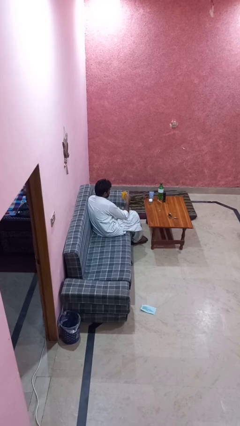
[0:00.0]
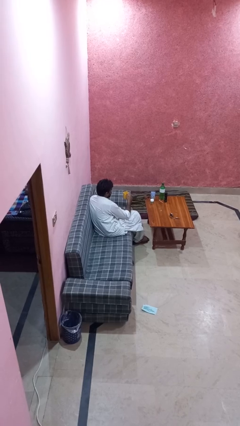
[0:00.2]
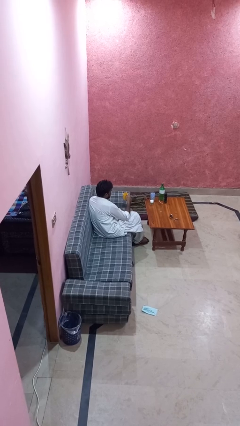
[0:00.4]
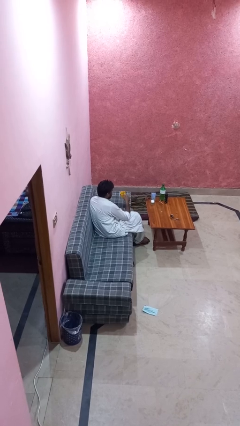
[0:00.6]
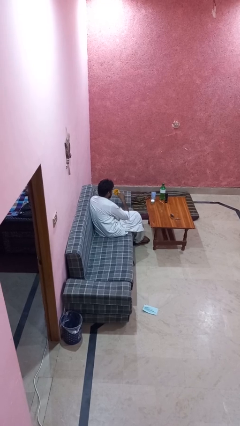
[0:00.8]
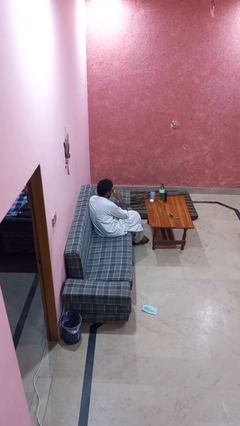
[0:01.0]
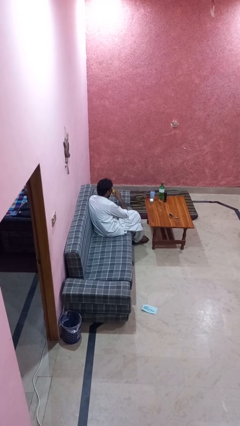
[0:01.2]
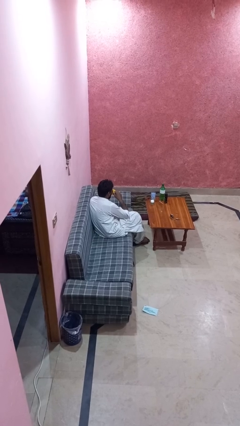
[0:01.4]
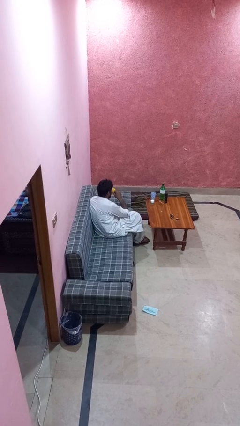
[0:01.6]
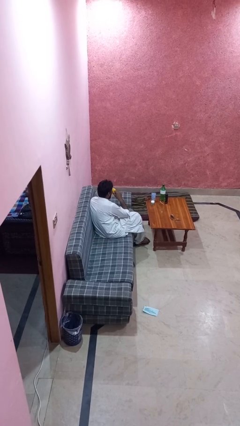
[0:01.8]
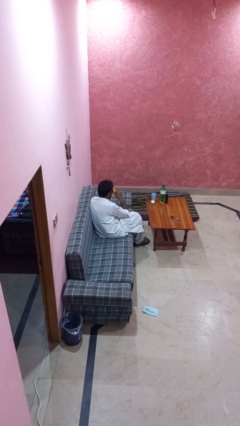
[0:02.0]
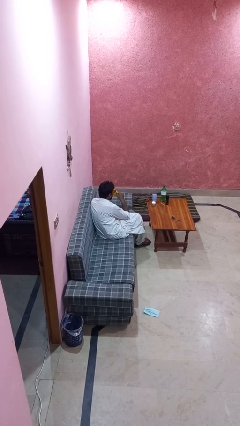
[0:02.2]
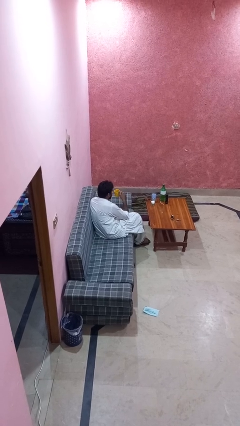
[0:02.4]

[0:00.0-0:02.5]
person drinks from mug

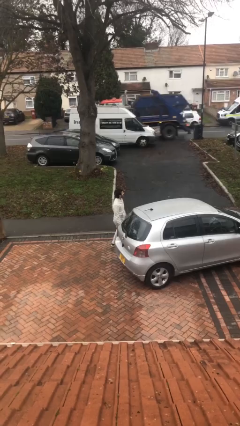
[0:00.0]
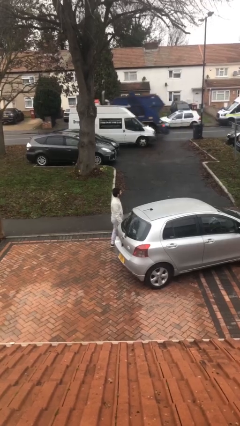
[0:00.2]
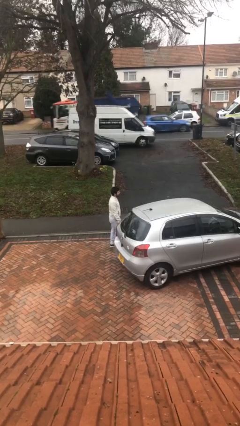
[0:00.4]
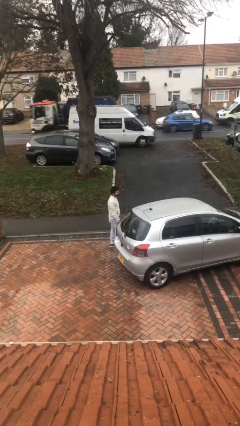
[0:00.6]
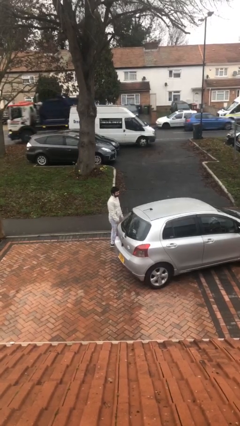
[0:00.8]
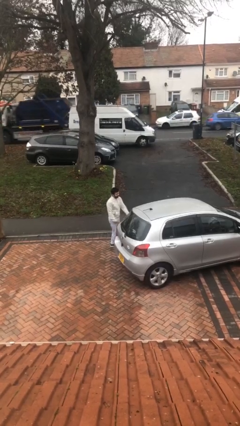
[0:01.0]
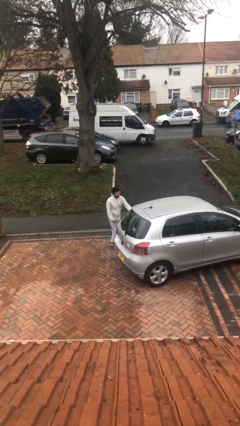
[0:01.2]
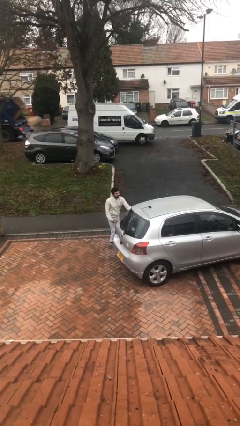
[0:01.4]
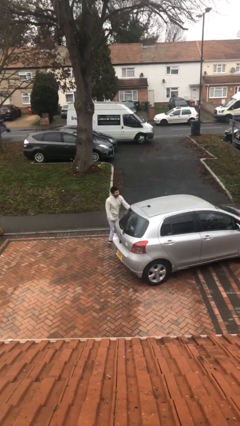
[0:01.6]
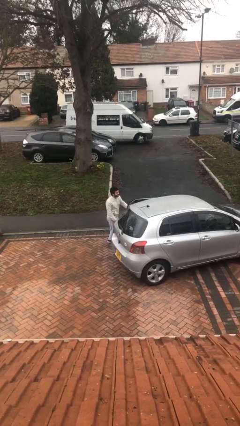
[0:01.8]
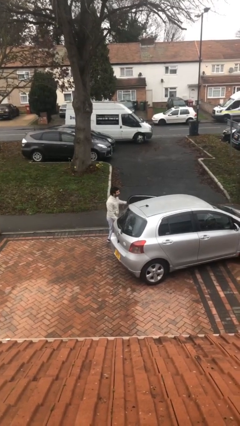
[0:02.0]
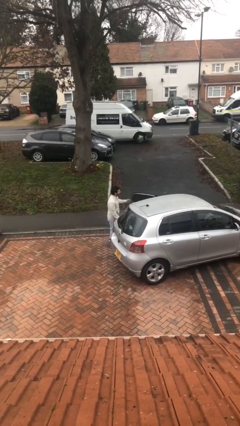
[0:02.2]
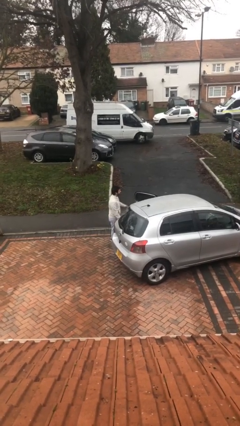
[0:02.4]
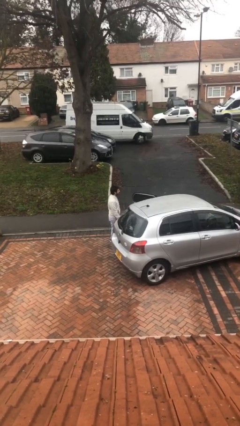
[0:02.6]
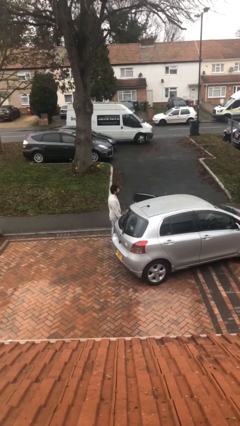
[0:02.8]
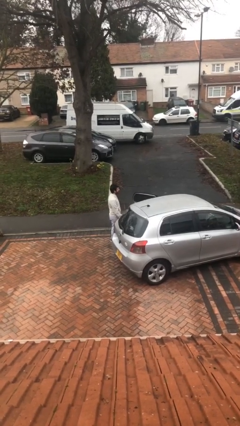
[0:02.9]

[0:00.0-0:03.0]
person opens car door

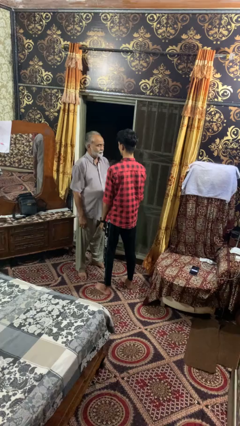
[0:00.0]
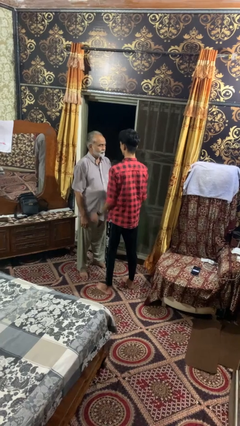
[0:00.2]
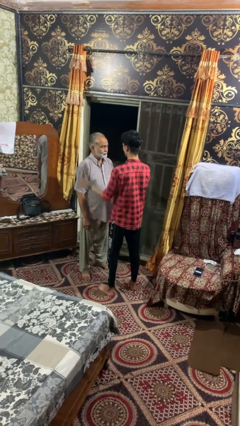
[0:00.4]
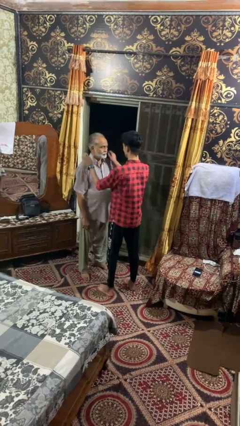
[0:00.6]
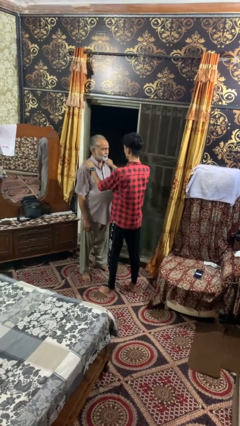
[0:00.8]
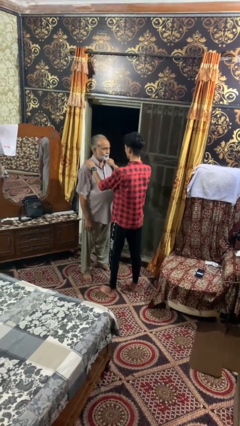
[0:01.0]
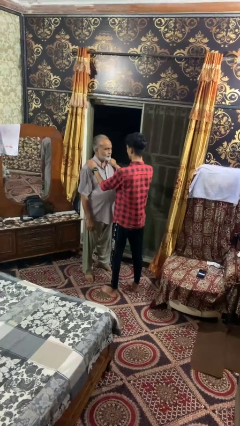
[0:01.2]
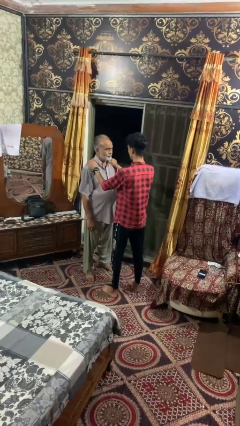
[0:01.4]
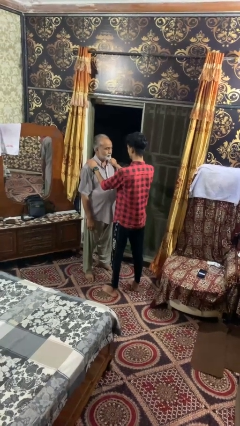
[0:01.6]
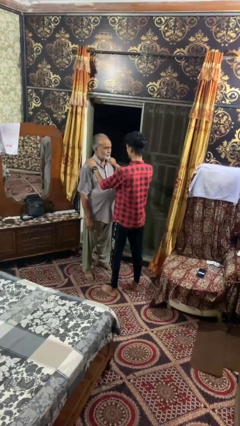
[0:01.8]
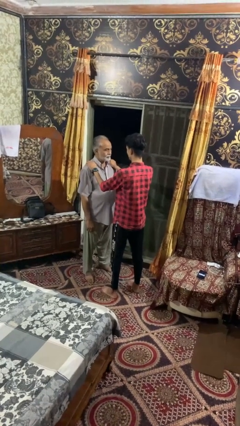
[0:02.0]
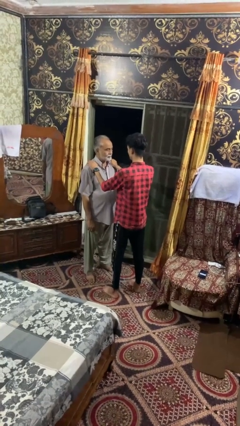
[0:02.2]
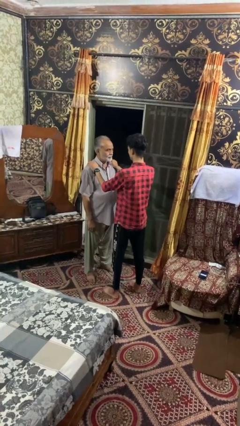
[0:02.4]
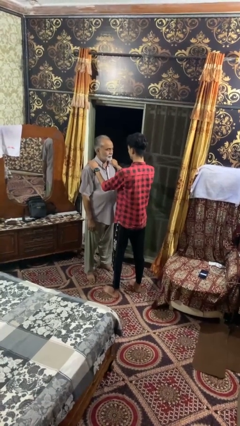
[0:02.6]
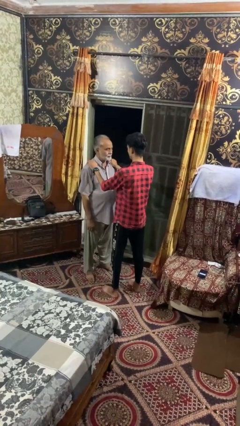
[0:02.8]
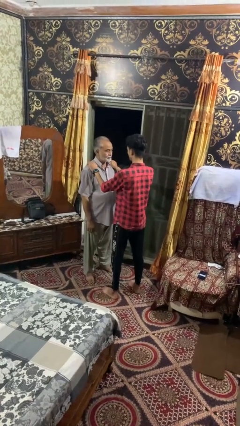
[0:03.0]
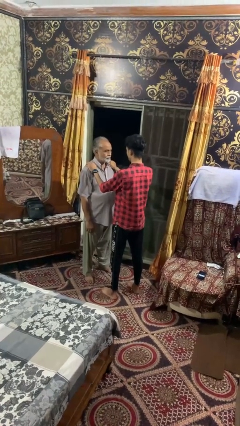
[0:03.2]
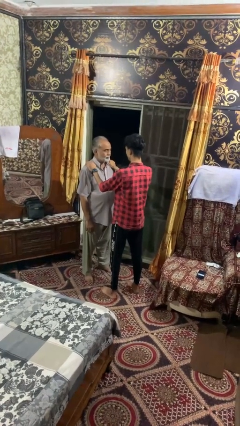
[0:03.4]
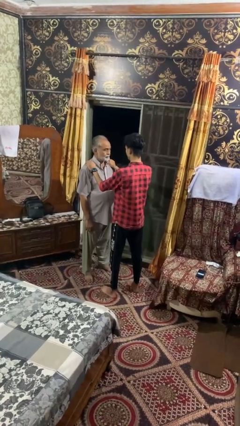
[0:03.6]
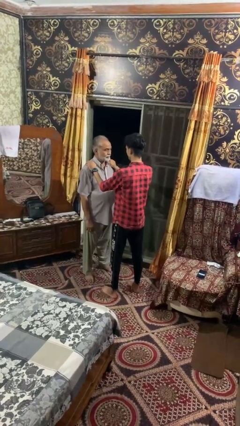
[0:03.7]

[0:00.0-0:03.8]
person pounds shoulders of person

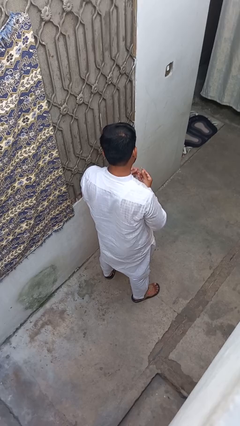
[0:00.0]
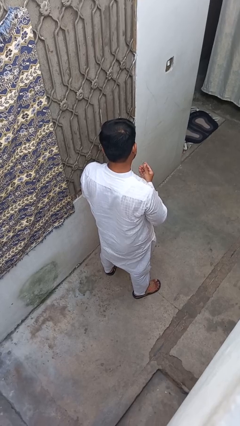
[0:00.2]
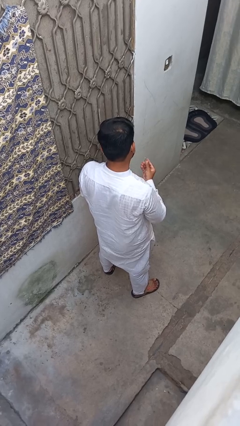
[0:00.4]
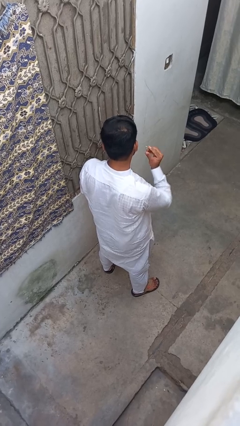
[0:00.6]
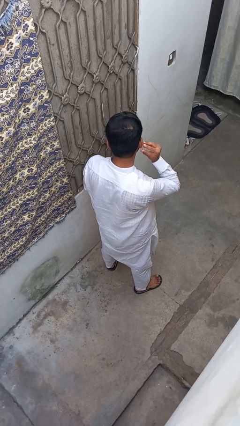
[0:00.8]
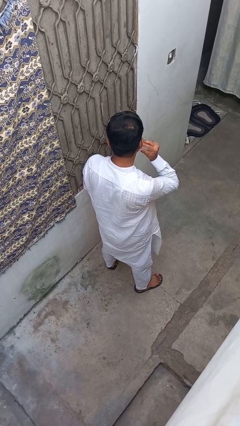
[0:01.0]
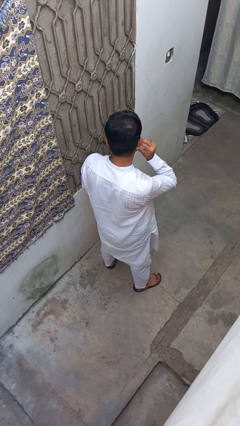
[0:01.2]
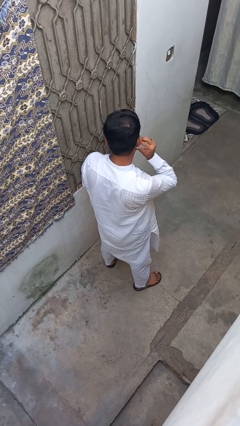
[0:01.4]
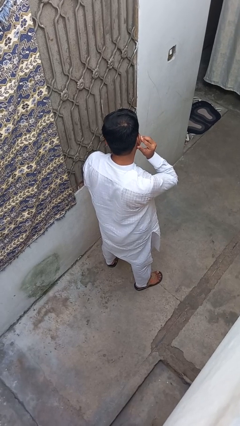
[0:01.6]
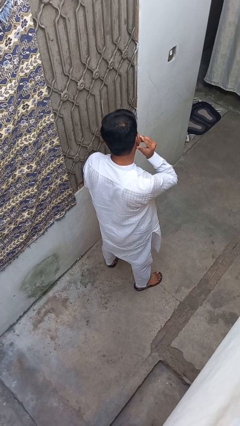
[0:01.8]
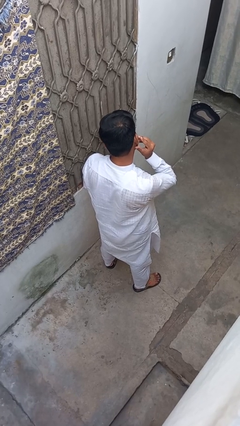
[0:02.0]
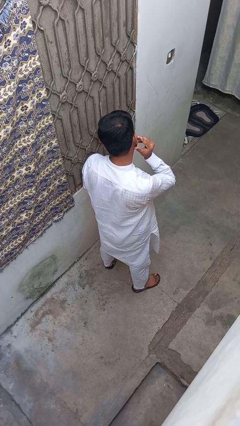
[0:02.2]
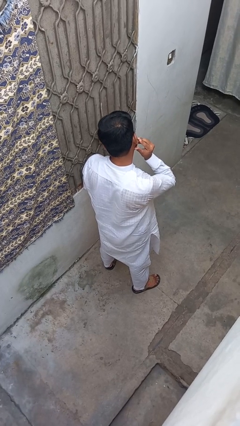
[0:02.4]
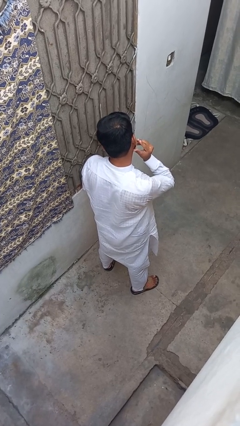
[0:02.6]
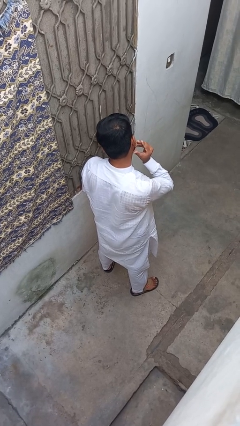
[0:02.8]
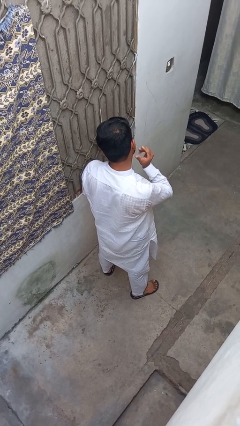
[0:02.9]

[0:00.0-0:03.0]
person puts on earrings

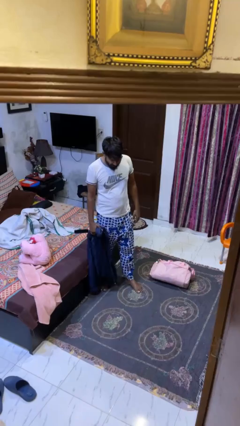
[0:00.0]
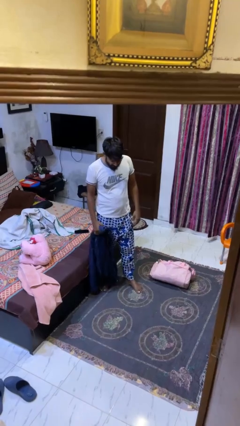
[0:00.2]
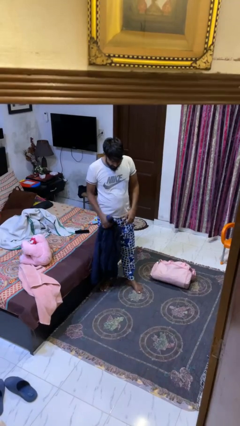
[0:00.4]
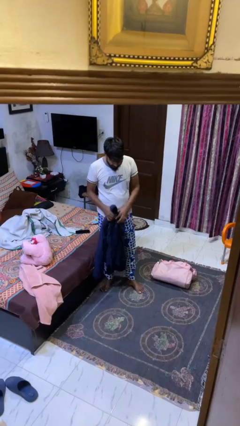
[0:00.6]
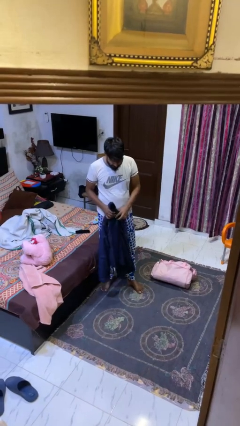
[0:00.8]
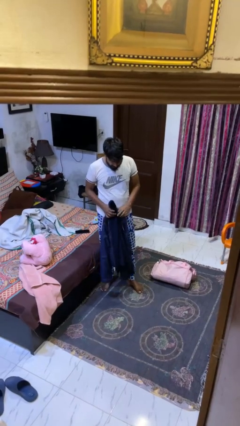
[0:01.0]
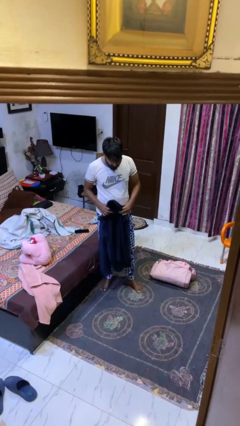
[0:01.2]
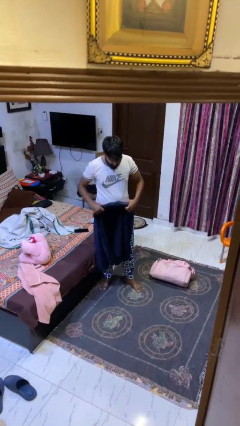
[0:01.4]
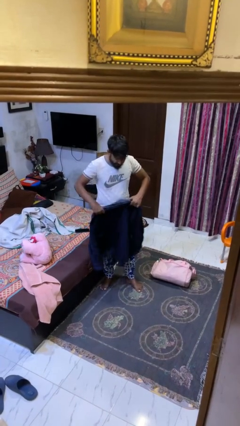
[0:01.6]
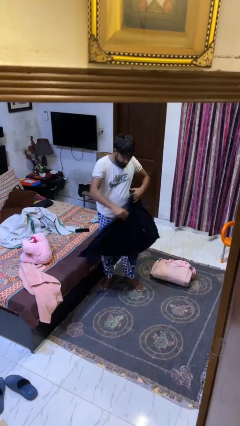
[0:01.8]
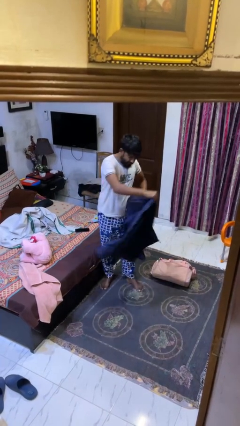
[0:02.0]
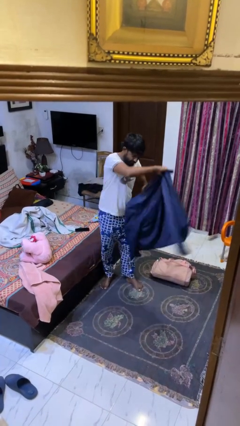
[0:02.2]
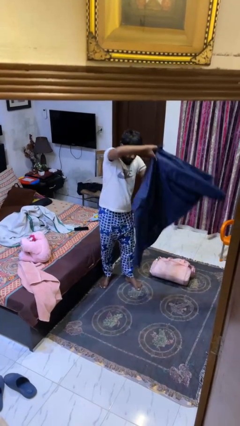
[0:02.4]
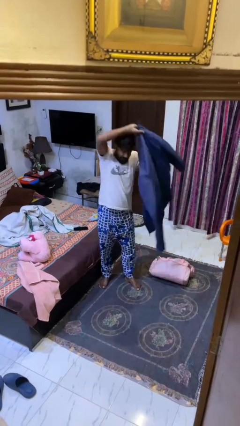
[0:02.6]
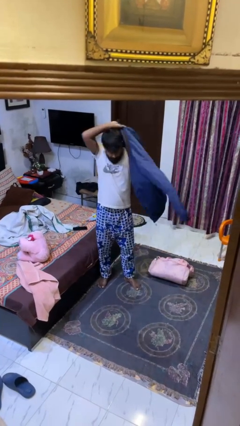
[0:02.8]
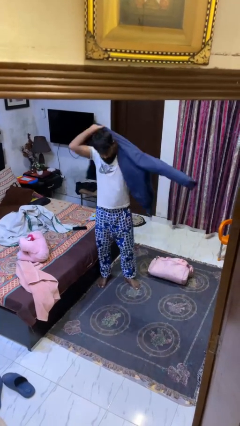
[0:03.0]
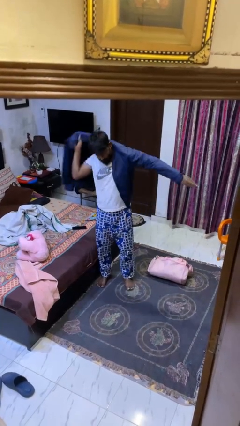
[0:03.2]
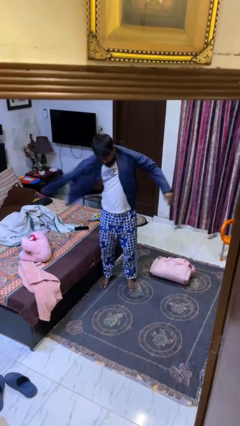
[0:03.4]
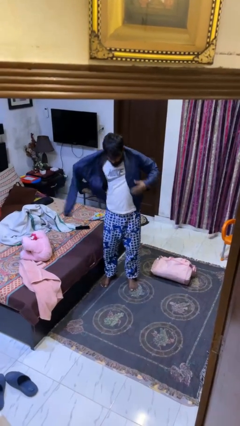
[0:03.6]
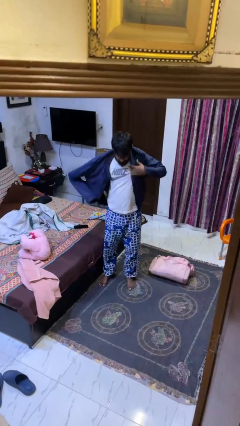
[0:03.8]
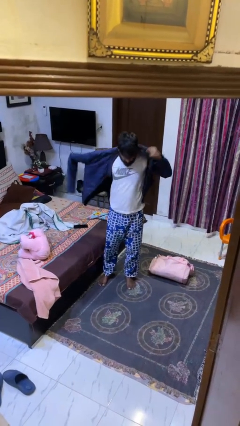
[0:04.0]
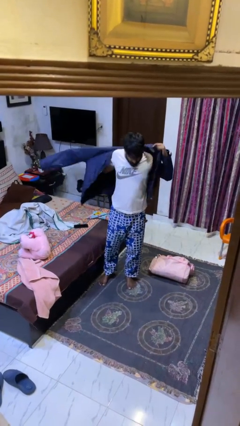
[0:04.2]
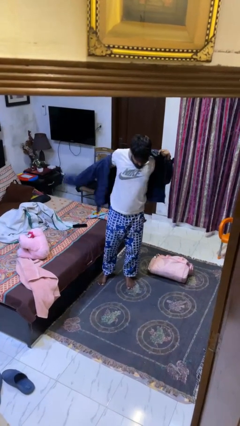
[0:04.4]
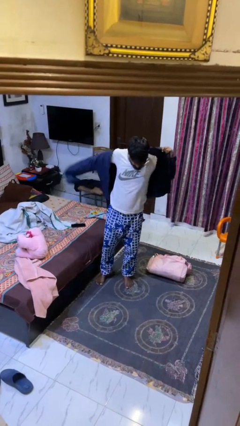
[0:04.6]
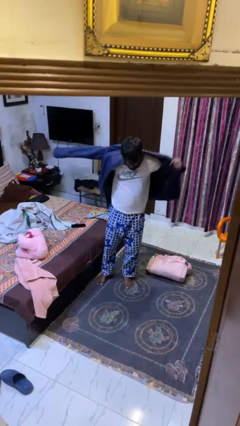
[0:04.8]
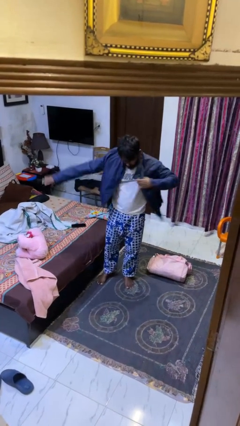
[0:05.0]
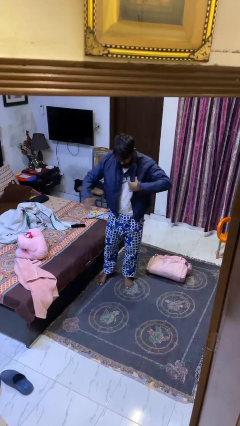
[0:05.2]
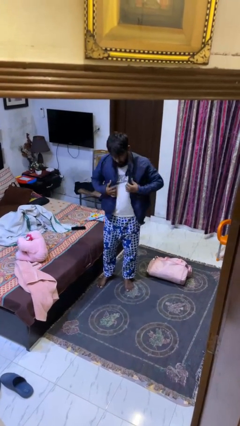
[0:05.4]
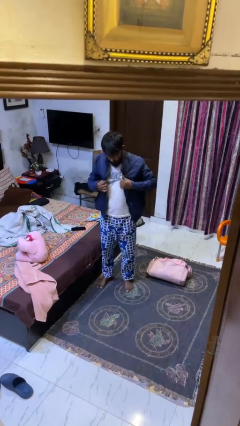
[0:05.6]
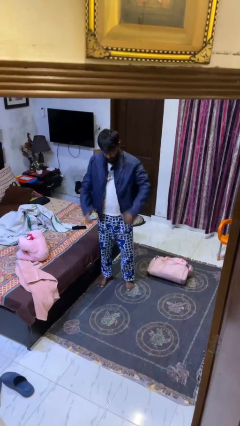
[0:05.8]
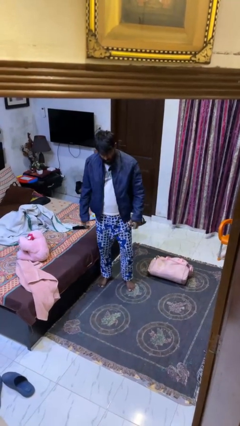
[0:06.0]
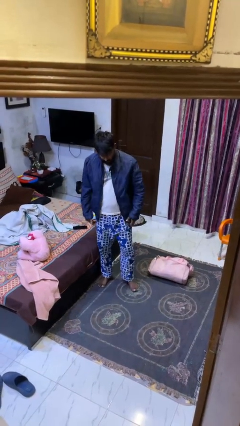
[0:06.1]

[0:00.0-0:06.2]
person puts on jacket
